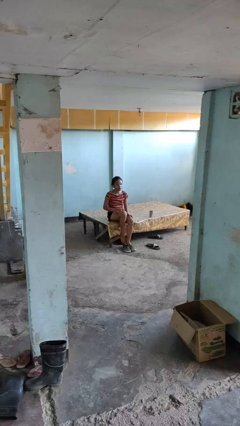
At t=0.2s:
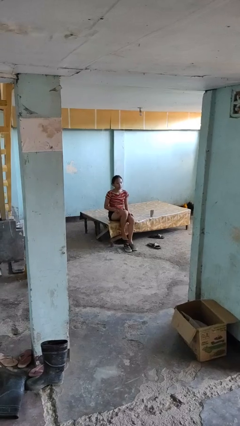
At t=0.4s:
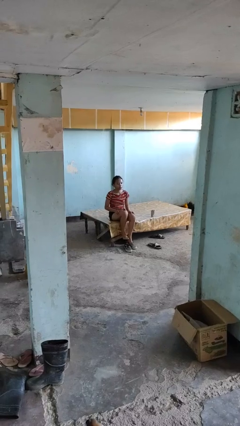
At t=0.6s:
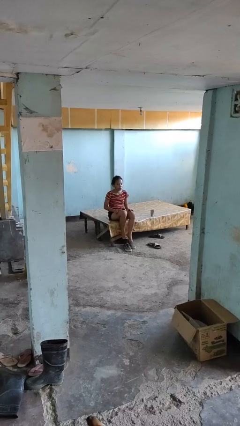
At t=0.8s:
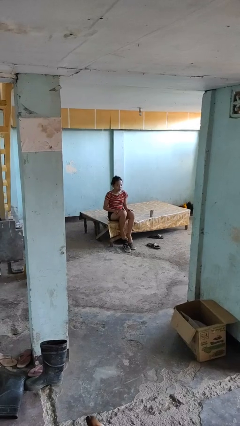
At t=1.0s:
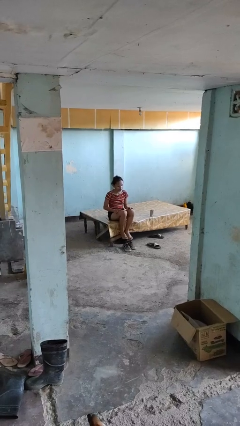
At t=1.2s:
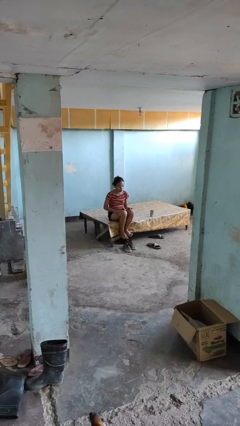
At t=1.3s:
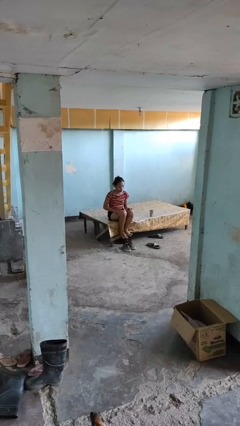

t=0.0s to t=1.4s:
person takes off shoes

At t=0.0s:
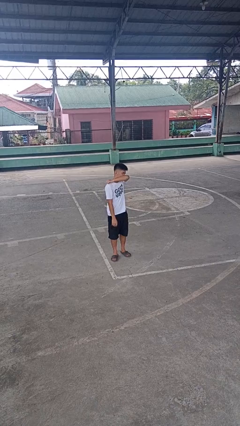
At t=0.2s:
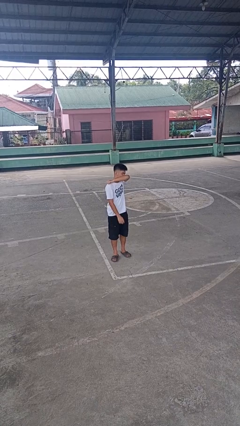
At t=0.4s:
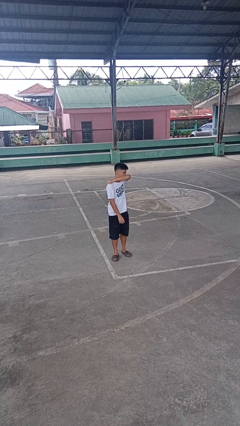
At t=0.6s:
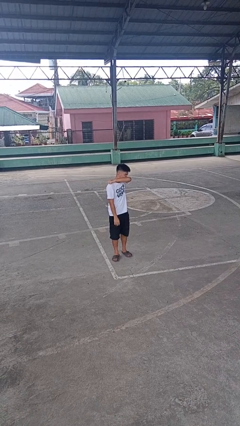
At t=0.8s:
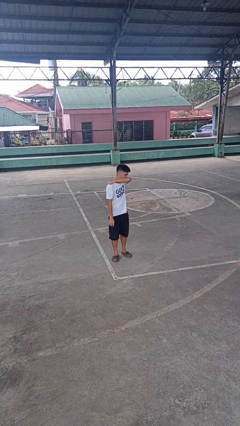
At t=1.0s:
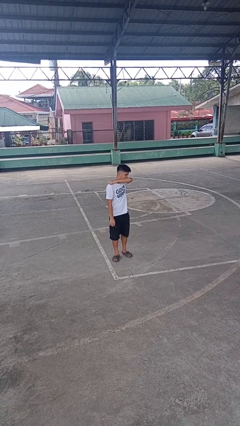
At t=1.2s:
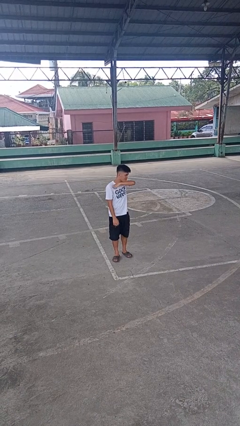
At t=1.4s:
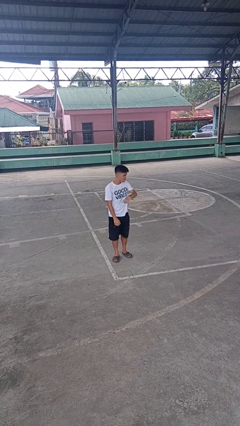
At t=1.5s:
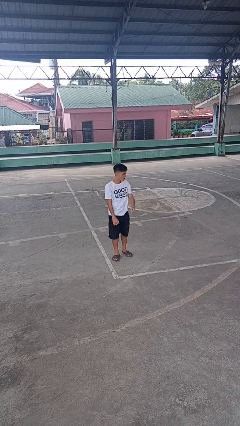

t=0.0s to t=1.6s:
person sneezes into arm

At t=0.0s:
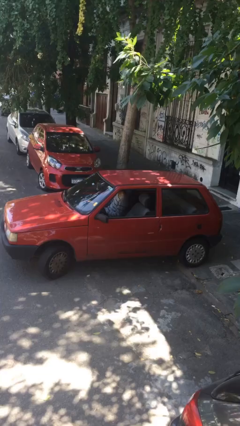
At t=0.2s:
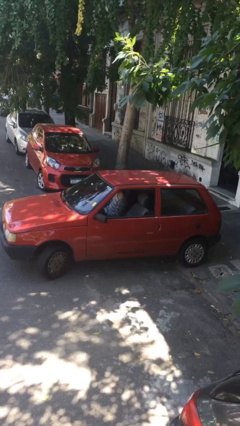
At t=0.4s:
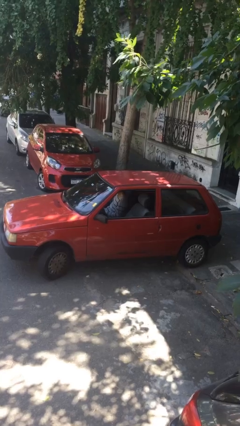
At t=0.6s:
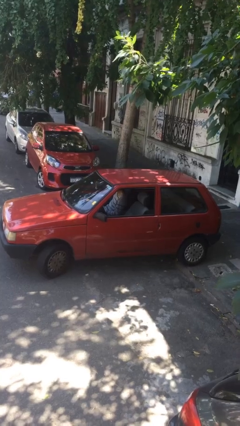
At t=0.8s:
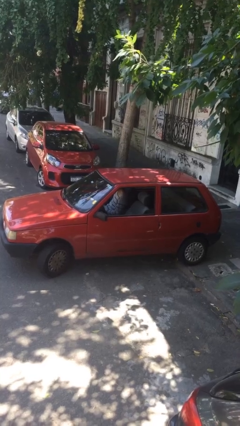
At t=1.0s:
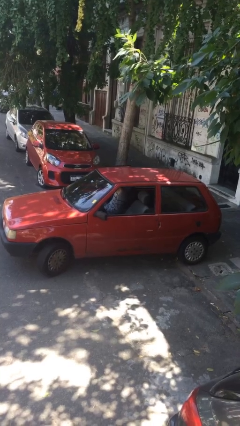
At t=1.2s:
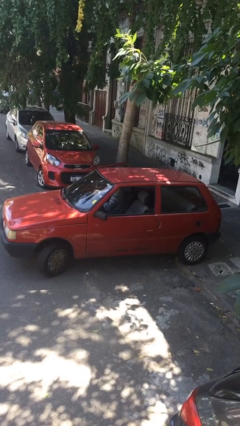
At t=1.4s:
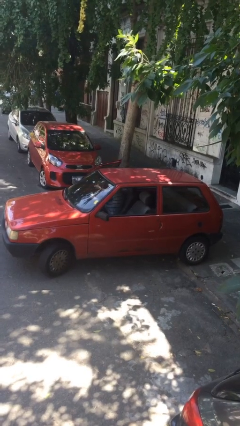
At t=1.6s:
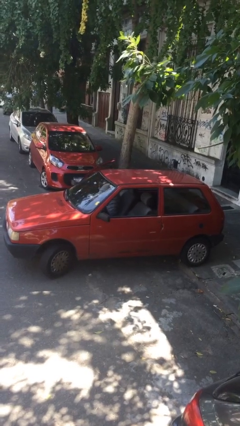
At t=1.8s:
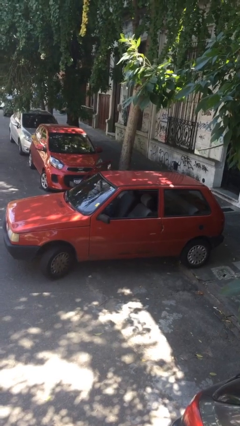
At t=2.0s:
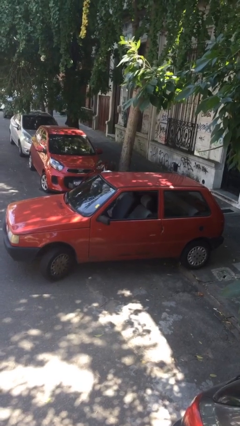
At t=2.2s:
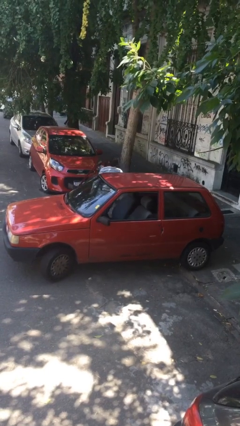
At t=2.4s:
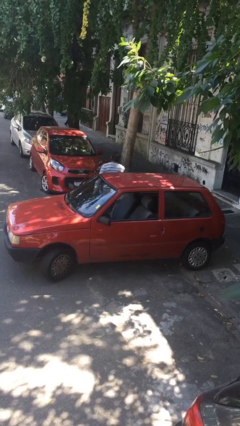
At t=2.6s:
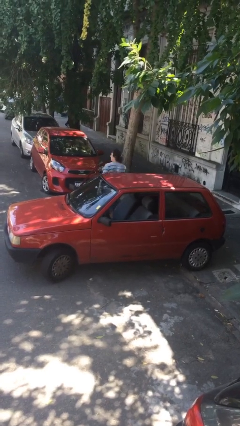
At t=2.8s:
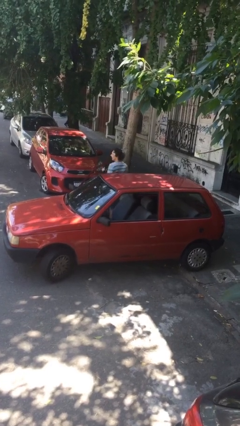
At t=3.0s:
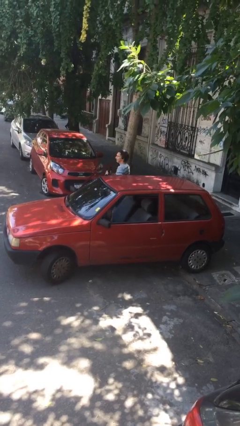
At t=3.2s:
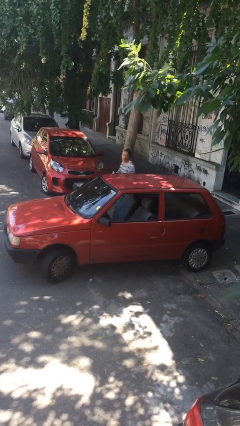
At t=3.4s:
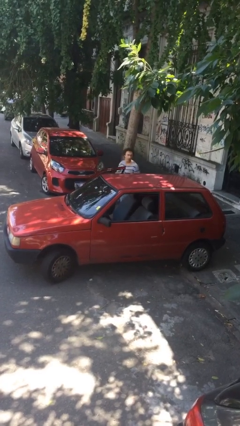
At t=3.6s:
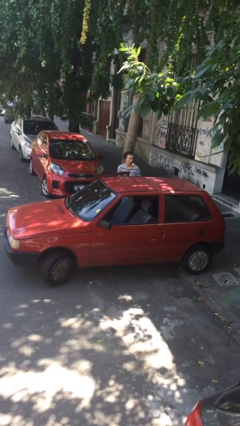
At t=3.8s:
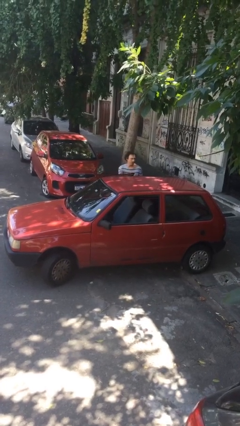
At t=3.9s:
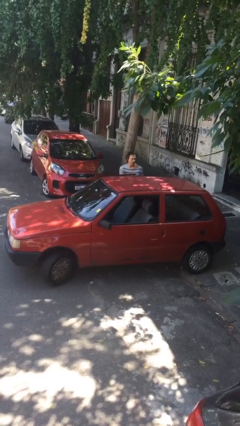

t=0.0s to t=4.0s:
car drops off person

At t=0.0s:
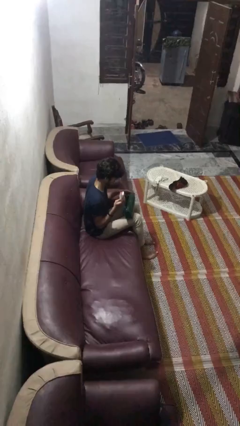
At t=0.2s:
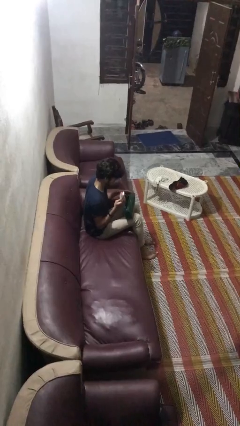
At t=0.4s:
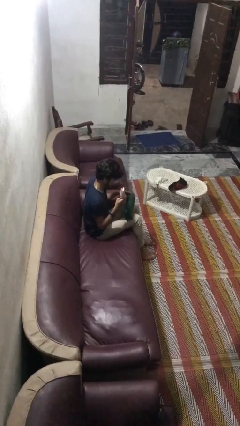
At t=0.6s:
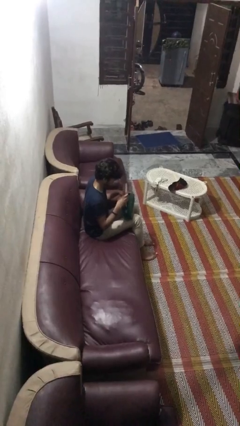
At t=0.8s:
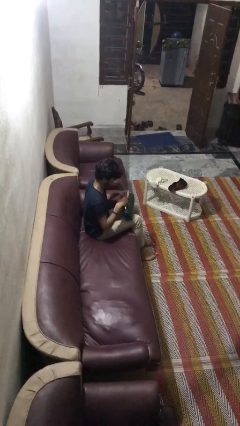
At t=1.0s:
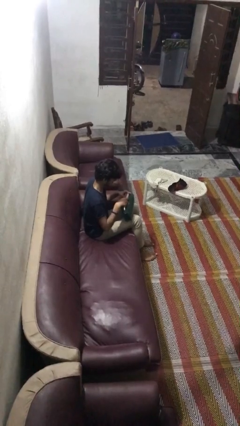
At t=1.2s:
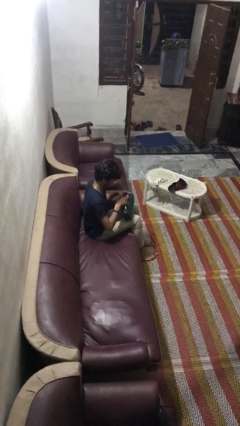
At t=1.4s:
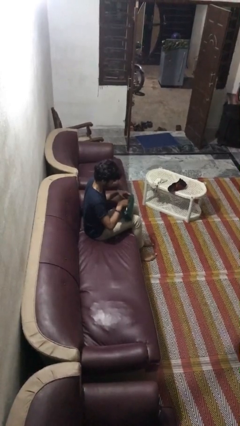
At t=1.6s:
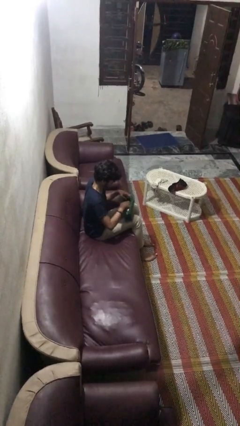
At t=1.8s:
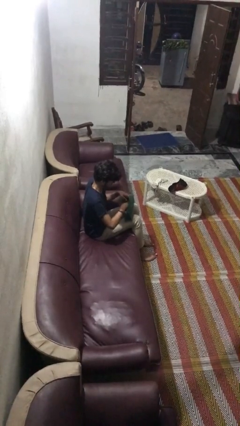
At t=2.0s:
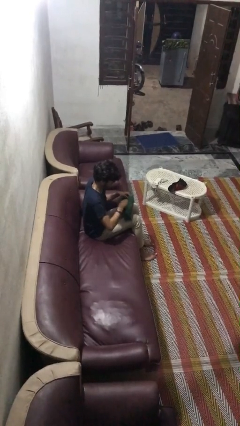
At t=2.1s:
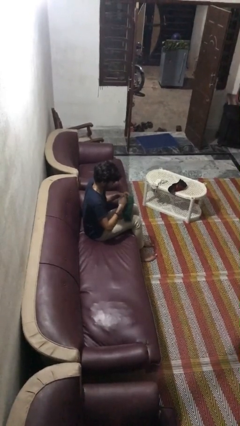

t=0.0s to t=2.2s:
person puts object into purse

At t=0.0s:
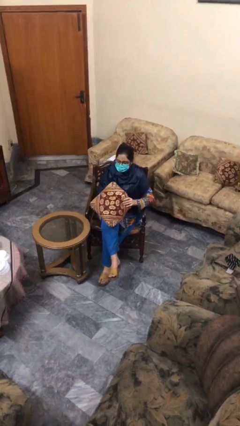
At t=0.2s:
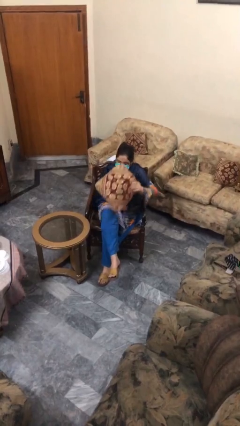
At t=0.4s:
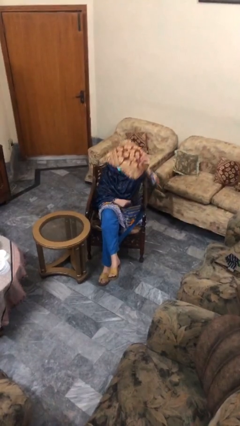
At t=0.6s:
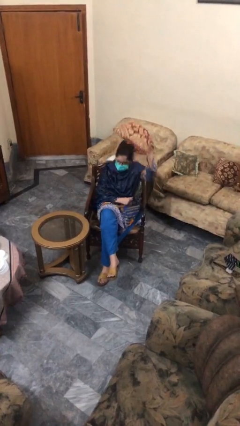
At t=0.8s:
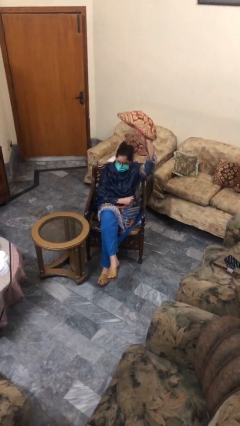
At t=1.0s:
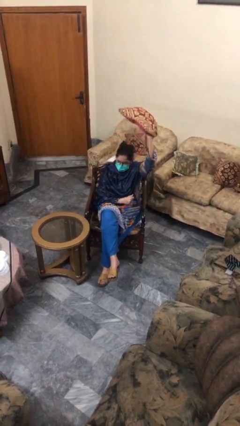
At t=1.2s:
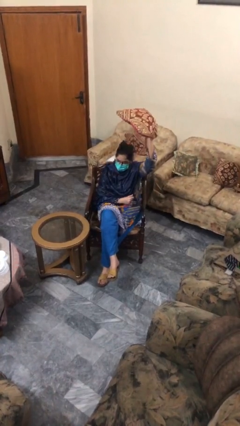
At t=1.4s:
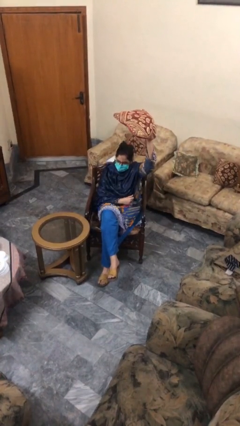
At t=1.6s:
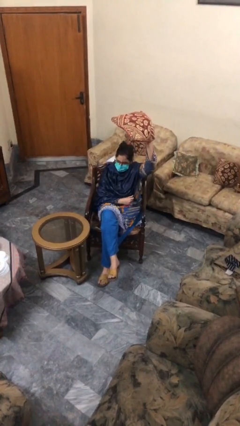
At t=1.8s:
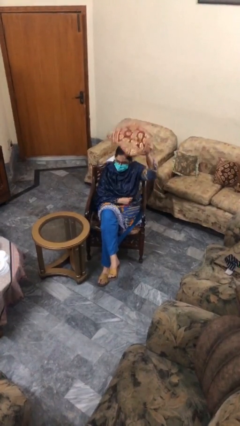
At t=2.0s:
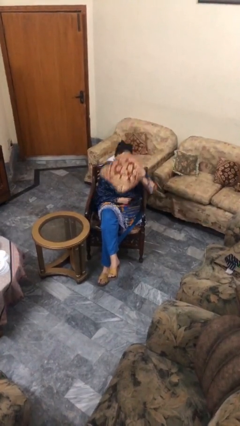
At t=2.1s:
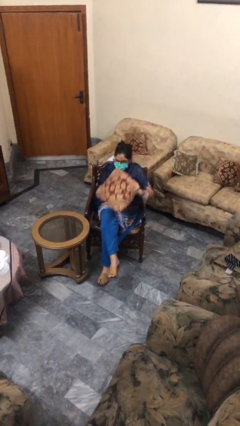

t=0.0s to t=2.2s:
person holds object above head

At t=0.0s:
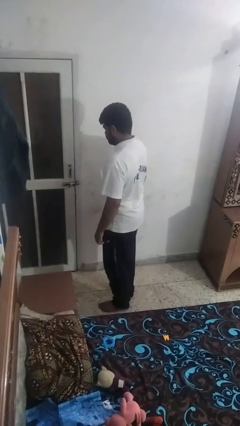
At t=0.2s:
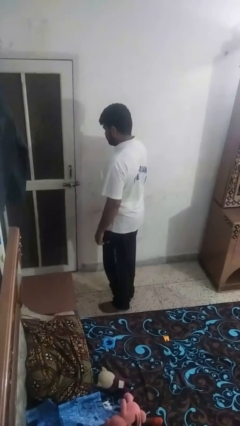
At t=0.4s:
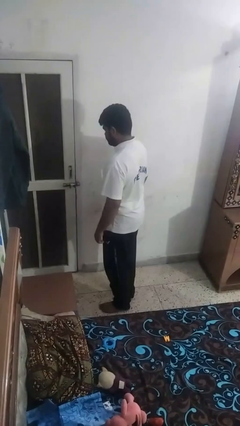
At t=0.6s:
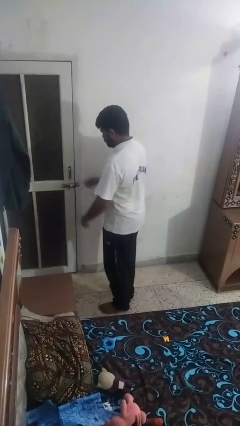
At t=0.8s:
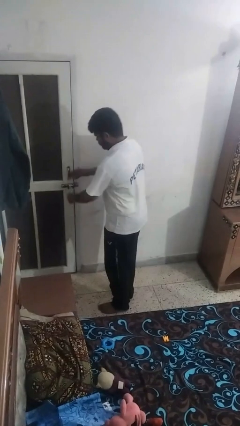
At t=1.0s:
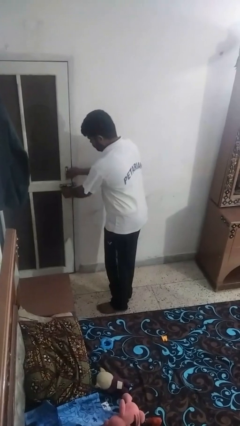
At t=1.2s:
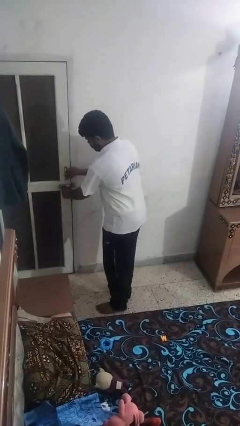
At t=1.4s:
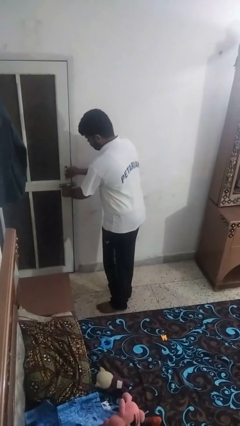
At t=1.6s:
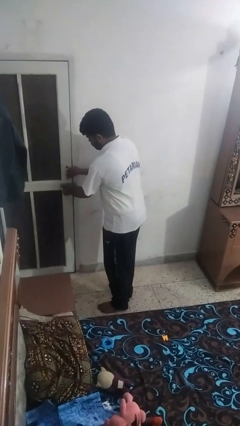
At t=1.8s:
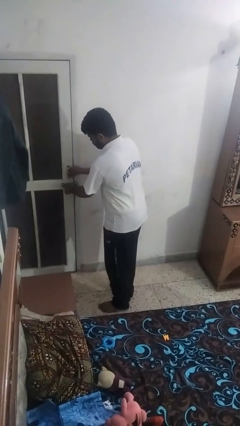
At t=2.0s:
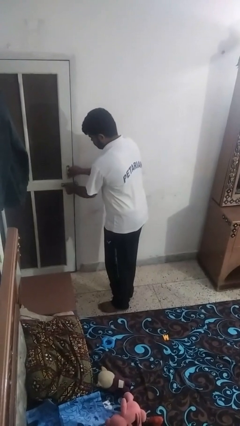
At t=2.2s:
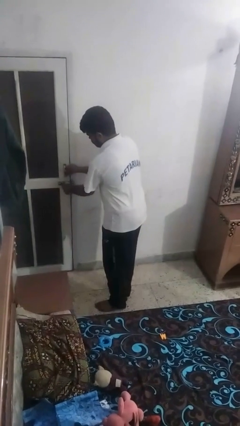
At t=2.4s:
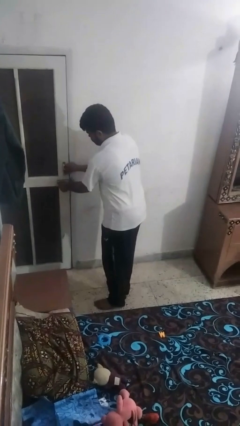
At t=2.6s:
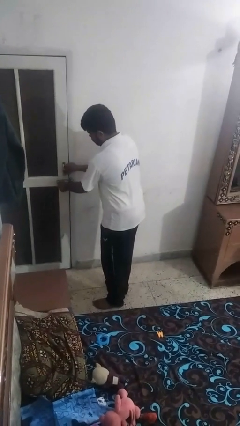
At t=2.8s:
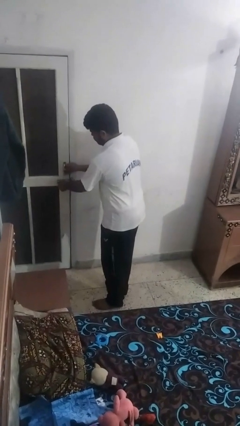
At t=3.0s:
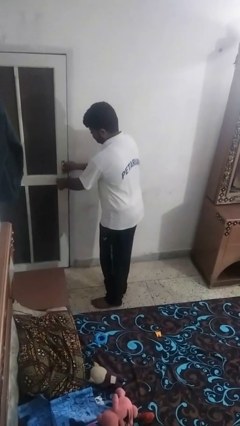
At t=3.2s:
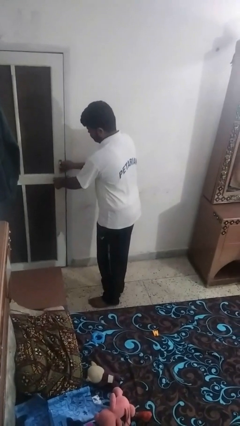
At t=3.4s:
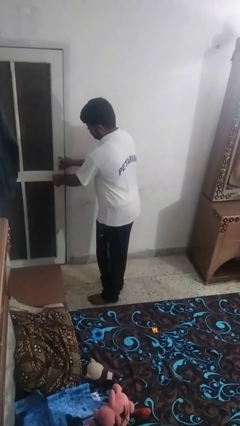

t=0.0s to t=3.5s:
person unlocks door with keys

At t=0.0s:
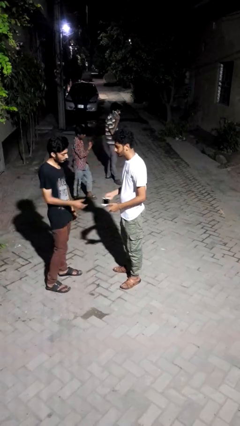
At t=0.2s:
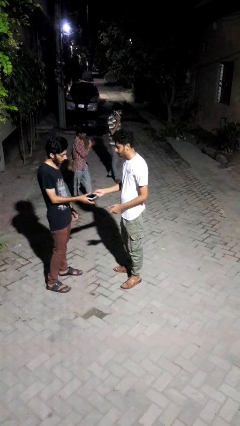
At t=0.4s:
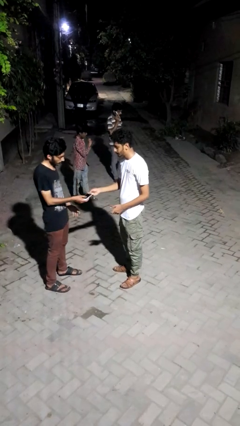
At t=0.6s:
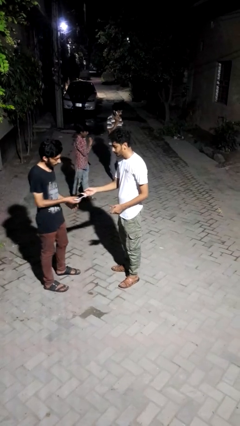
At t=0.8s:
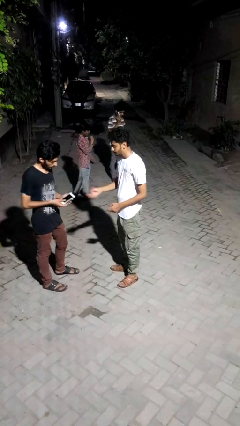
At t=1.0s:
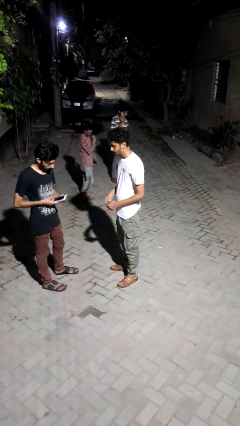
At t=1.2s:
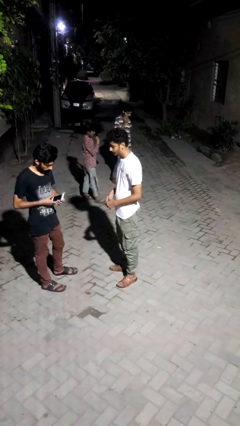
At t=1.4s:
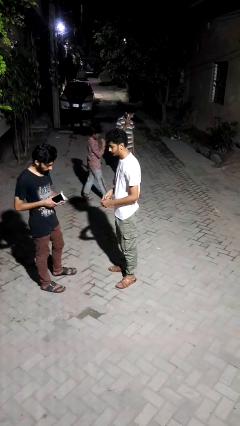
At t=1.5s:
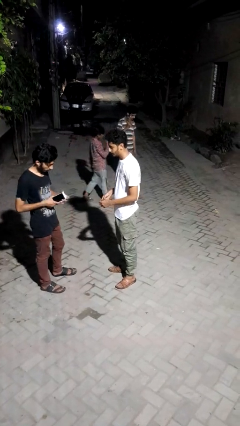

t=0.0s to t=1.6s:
person transfers object to person

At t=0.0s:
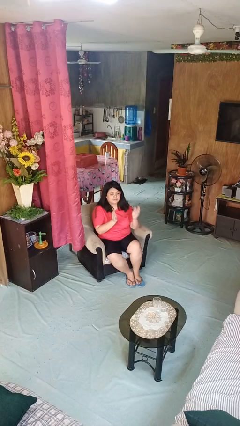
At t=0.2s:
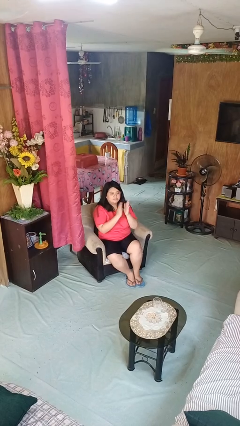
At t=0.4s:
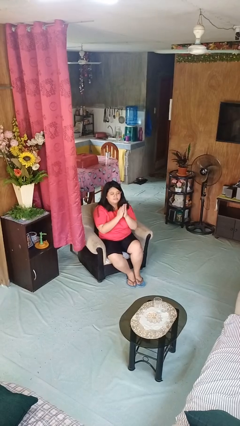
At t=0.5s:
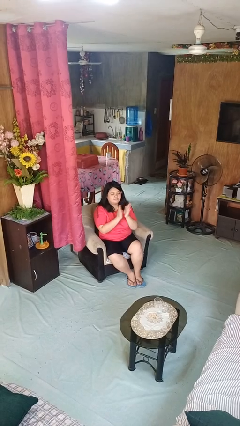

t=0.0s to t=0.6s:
person claps hands

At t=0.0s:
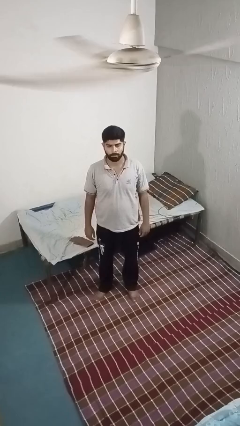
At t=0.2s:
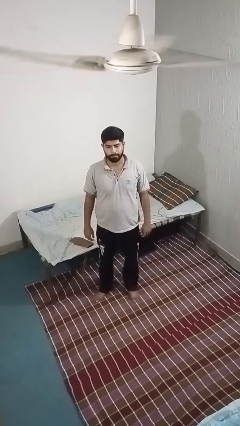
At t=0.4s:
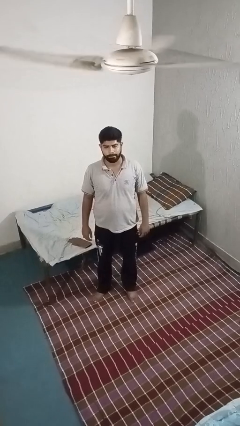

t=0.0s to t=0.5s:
person sits crisscross
